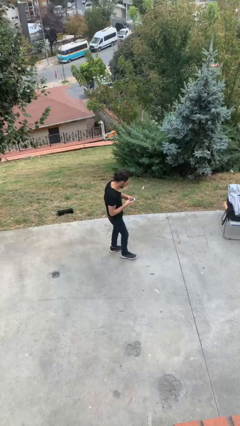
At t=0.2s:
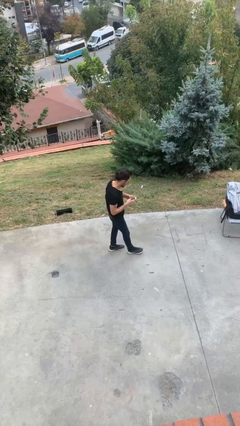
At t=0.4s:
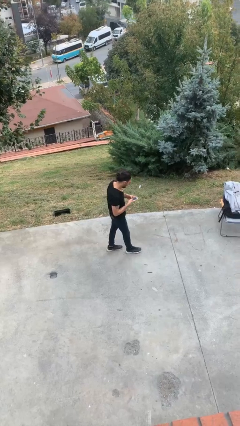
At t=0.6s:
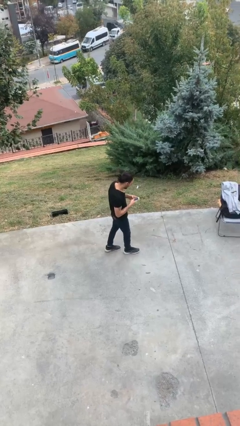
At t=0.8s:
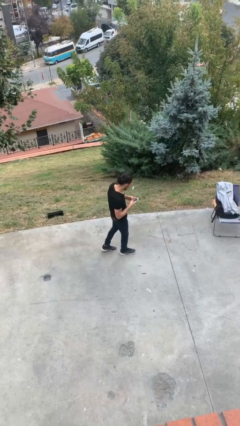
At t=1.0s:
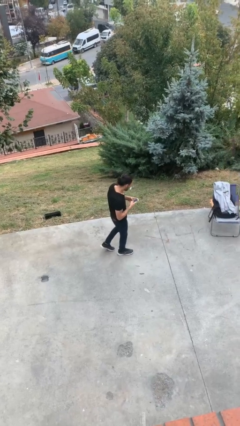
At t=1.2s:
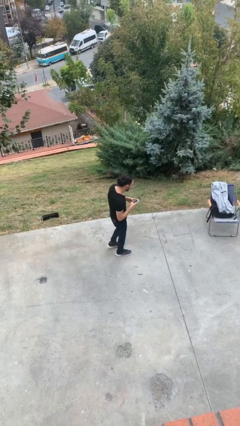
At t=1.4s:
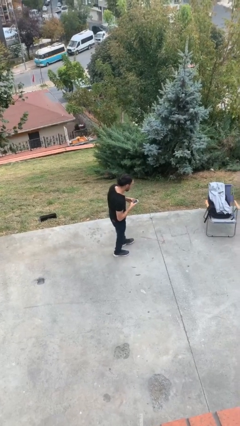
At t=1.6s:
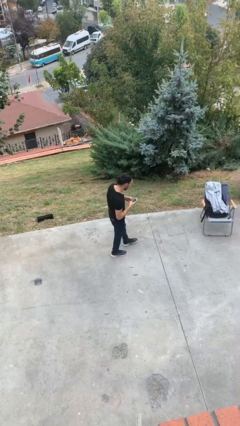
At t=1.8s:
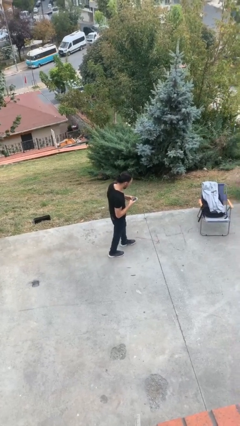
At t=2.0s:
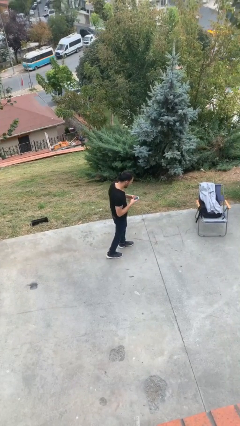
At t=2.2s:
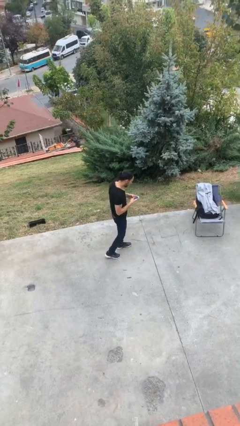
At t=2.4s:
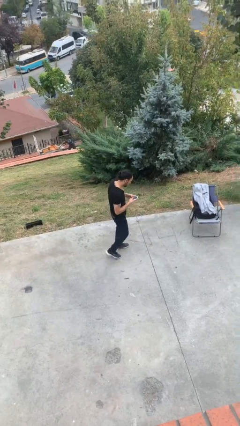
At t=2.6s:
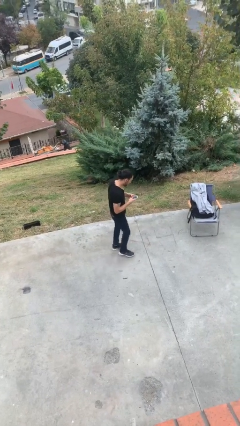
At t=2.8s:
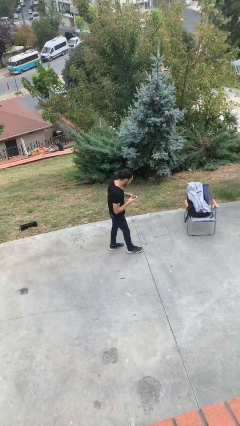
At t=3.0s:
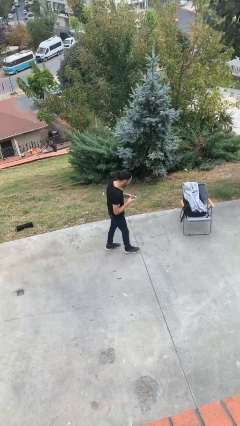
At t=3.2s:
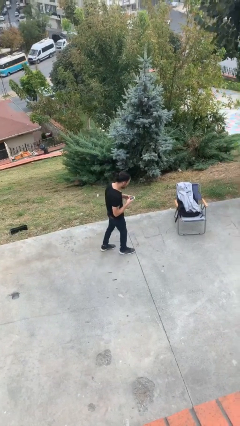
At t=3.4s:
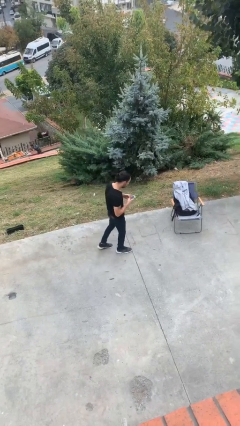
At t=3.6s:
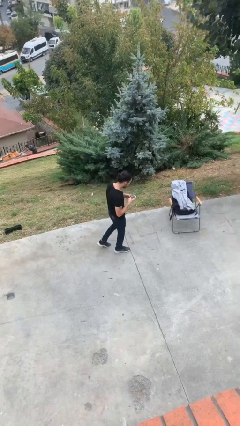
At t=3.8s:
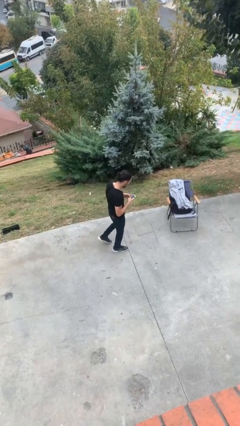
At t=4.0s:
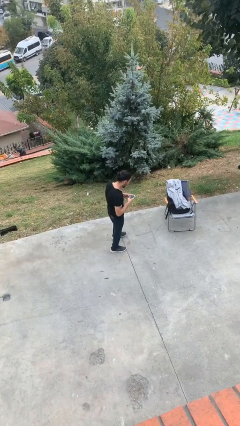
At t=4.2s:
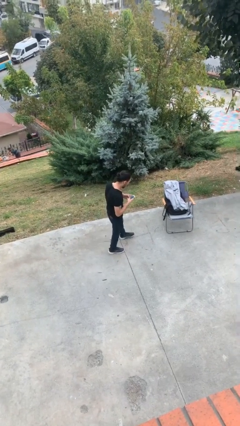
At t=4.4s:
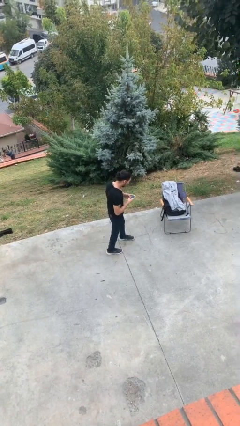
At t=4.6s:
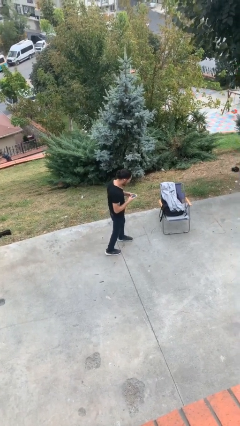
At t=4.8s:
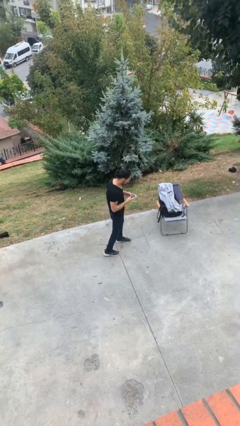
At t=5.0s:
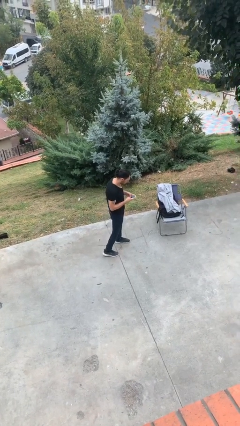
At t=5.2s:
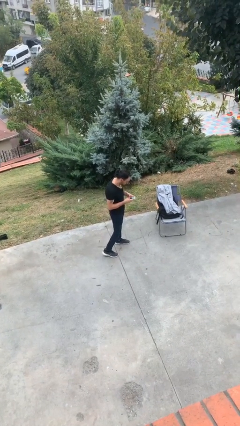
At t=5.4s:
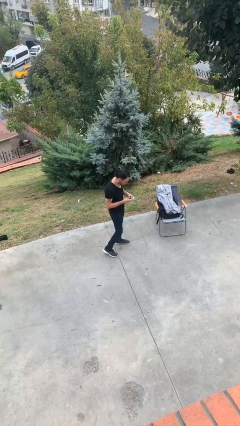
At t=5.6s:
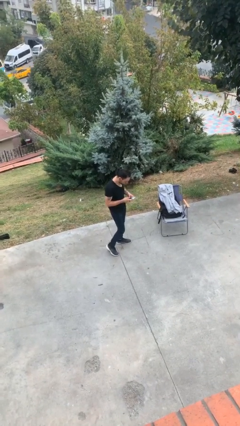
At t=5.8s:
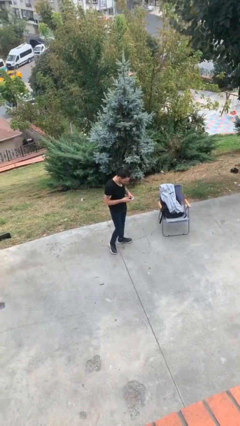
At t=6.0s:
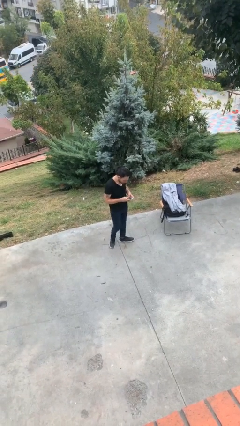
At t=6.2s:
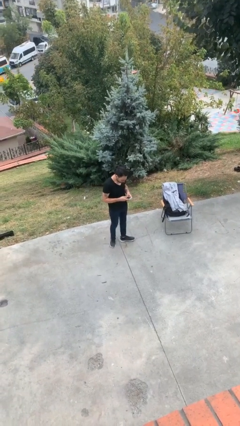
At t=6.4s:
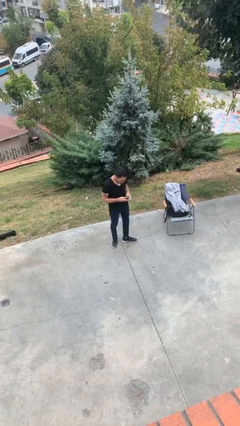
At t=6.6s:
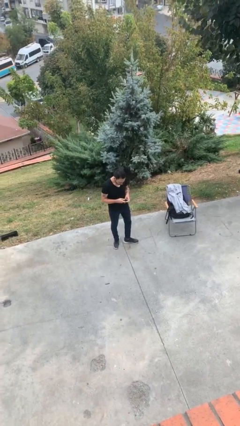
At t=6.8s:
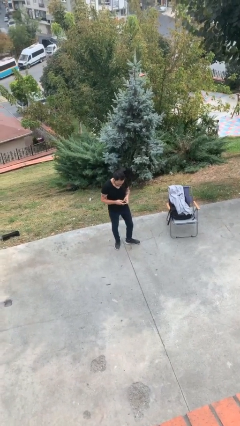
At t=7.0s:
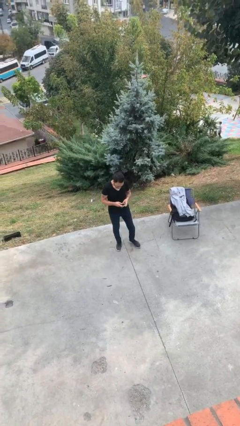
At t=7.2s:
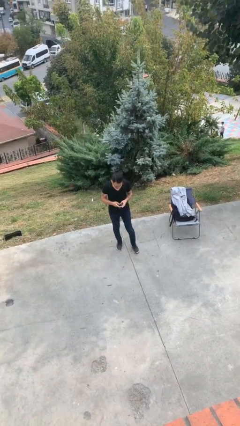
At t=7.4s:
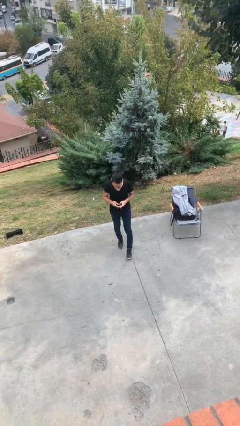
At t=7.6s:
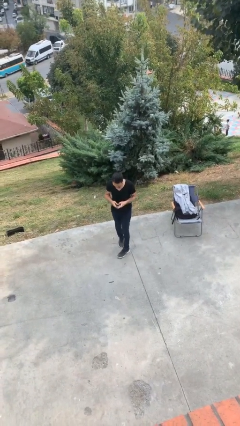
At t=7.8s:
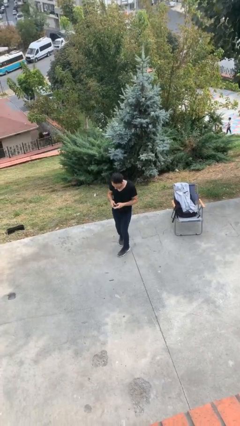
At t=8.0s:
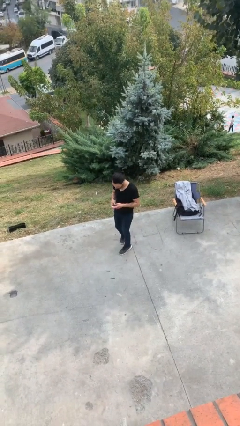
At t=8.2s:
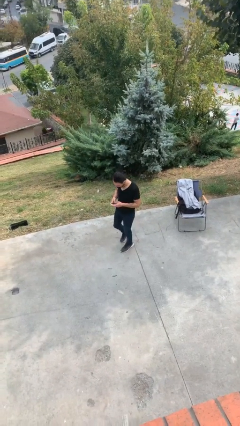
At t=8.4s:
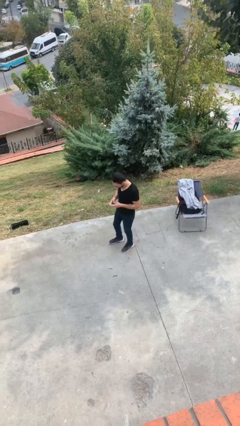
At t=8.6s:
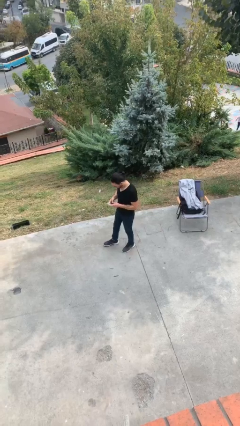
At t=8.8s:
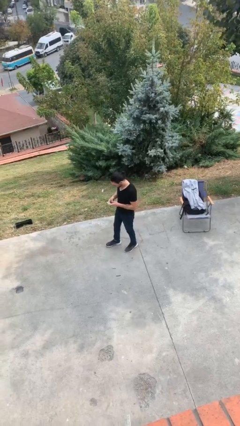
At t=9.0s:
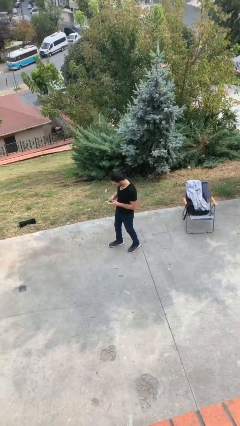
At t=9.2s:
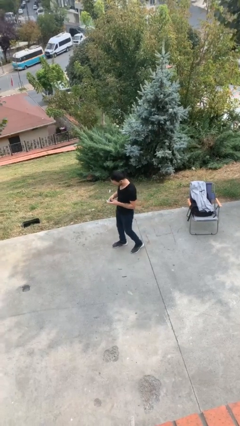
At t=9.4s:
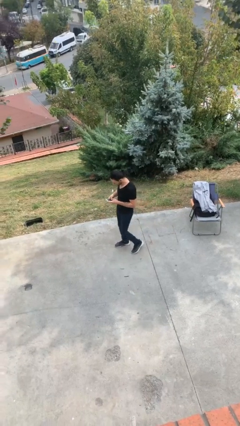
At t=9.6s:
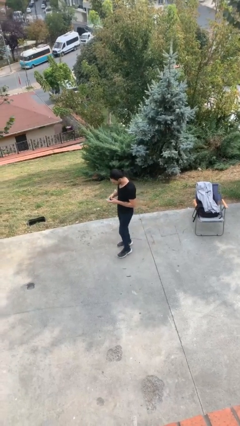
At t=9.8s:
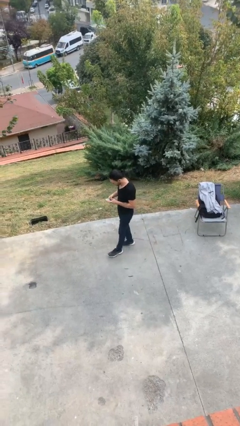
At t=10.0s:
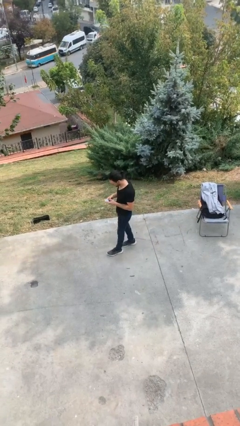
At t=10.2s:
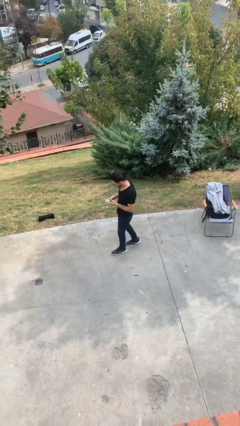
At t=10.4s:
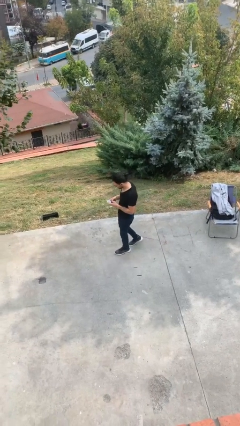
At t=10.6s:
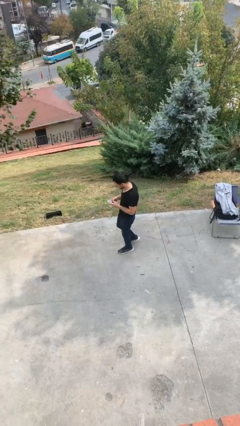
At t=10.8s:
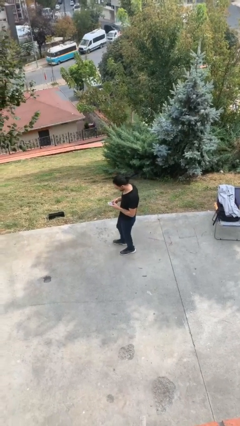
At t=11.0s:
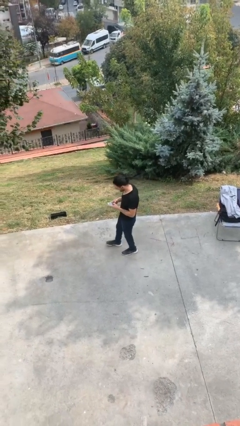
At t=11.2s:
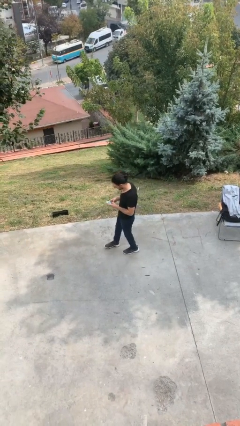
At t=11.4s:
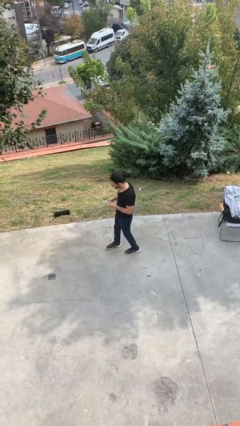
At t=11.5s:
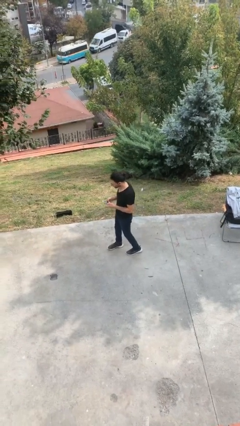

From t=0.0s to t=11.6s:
person texts on phone

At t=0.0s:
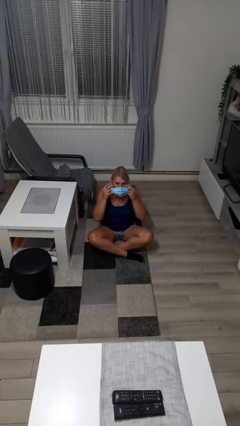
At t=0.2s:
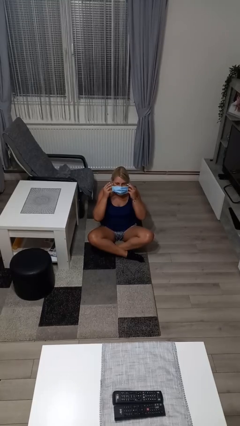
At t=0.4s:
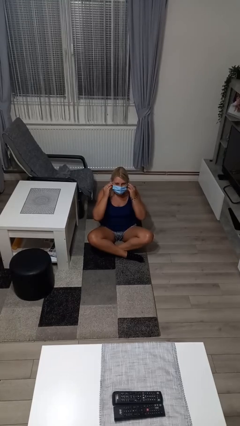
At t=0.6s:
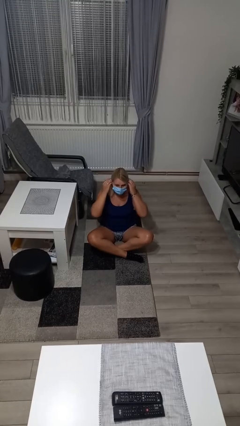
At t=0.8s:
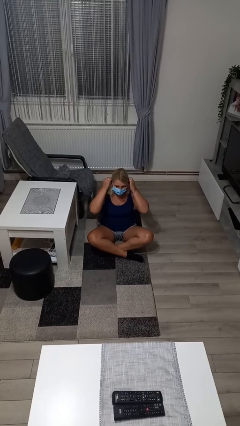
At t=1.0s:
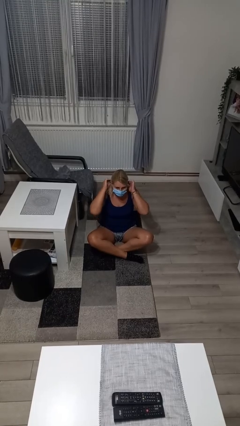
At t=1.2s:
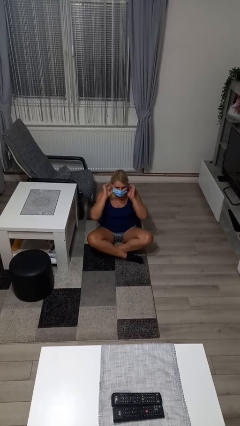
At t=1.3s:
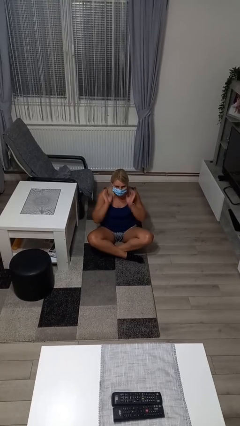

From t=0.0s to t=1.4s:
person puts on facemask

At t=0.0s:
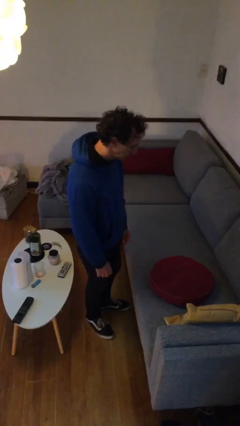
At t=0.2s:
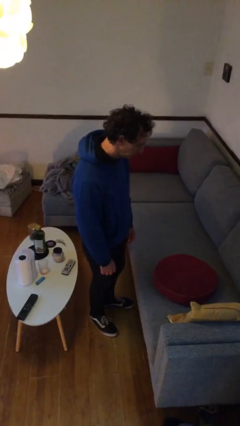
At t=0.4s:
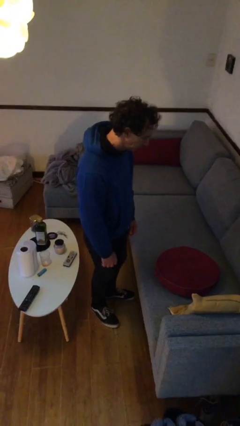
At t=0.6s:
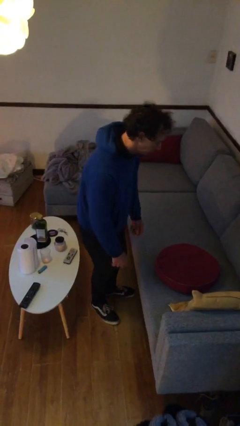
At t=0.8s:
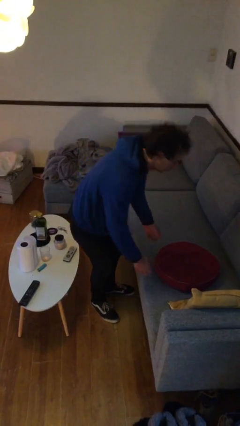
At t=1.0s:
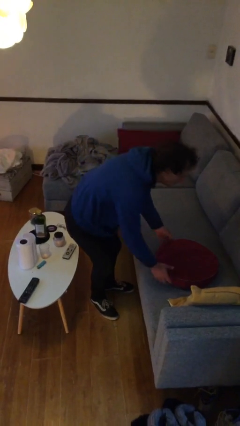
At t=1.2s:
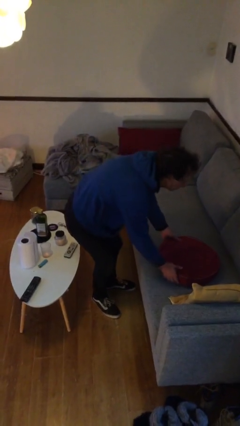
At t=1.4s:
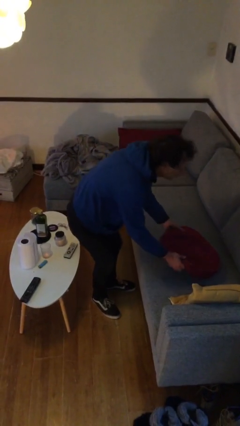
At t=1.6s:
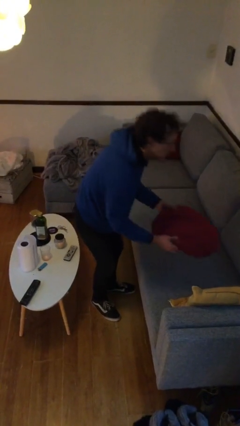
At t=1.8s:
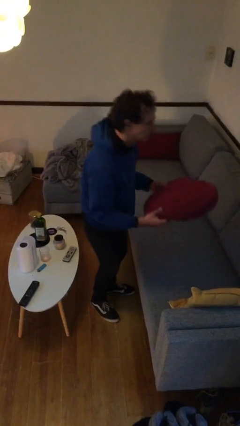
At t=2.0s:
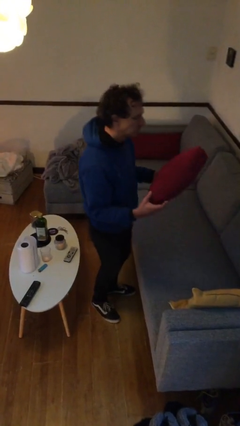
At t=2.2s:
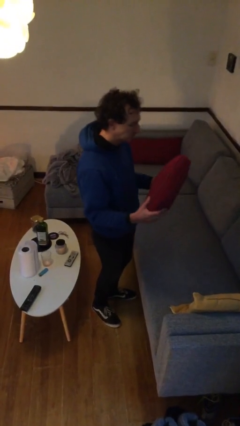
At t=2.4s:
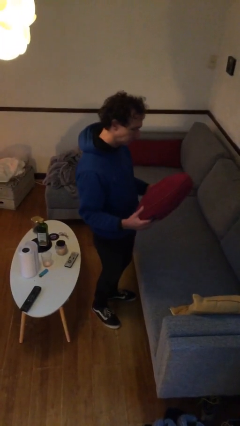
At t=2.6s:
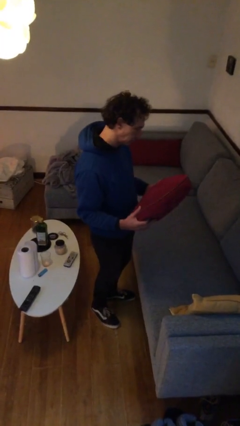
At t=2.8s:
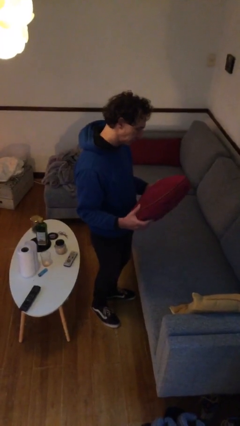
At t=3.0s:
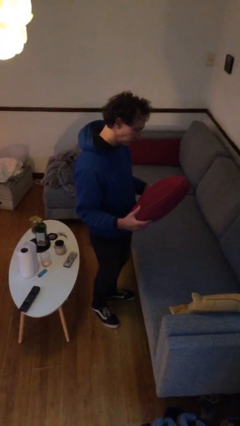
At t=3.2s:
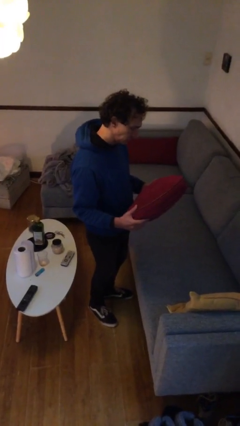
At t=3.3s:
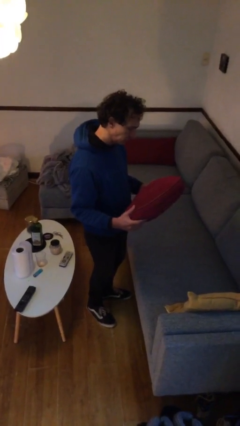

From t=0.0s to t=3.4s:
person picks up object from couch

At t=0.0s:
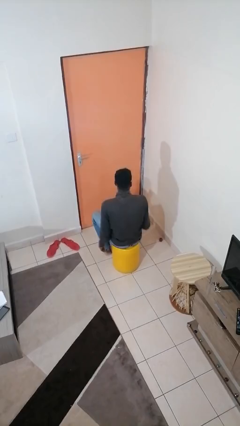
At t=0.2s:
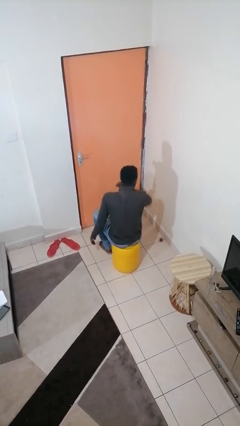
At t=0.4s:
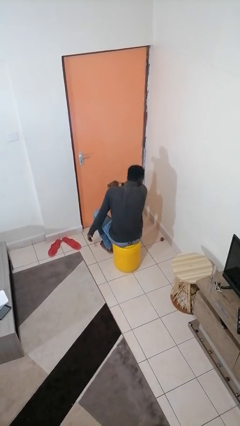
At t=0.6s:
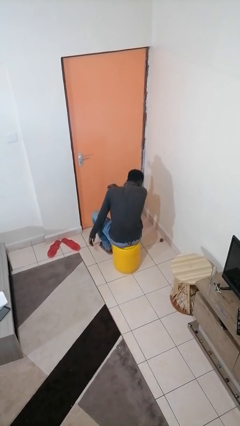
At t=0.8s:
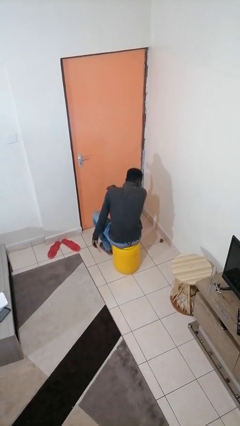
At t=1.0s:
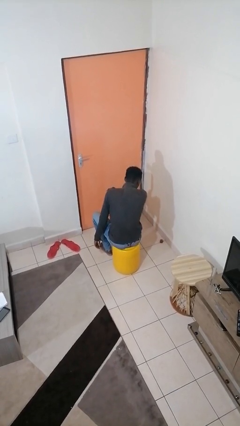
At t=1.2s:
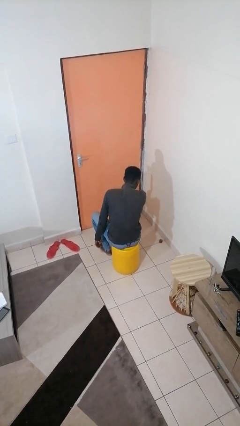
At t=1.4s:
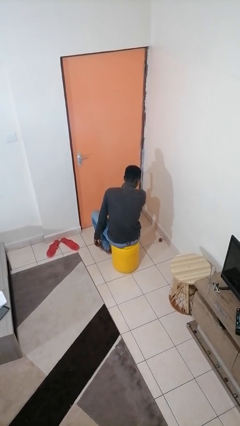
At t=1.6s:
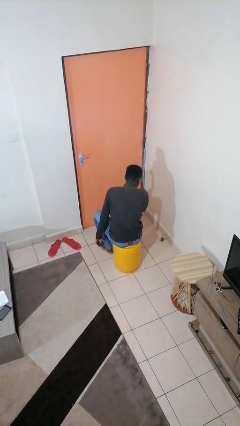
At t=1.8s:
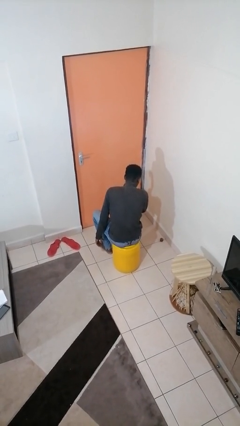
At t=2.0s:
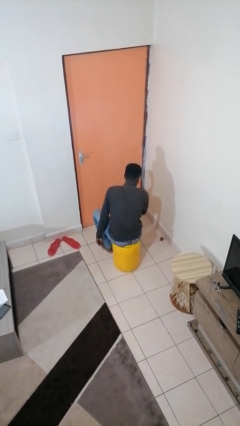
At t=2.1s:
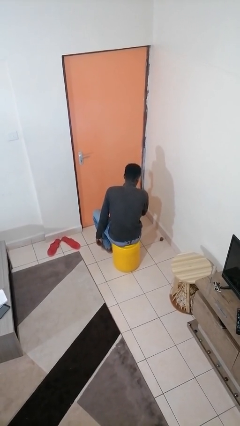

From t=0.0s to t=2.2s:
person sneezes into arm
